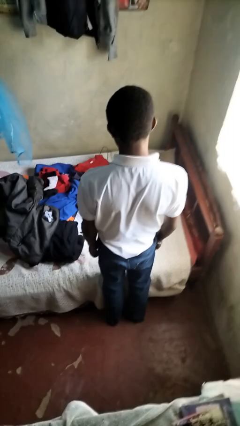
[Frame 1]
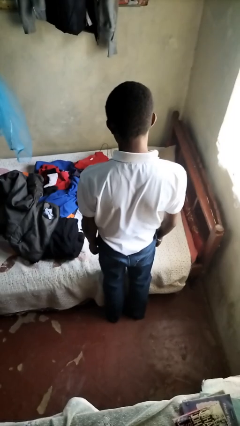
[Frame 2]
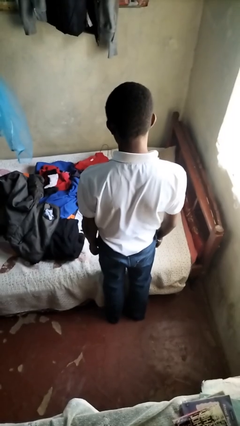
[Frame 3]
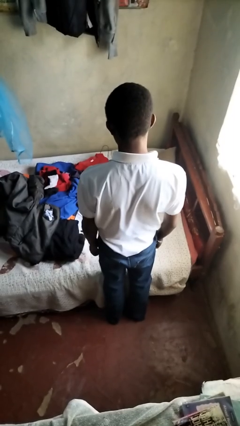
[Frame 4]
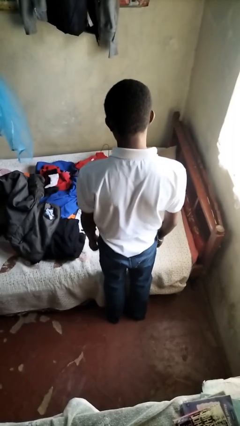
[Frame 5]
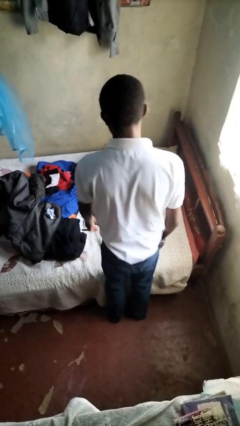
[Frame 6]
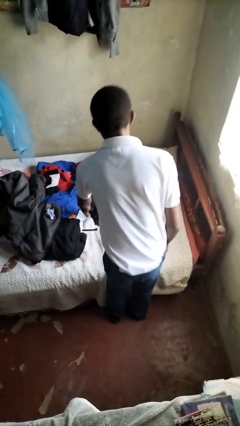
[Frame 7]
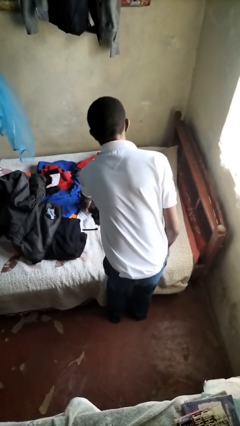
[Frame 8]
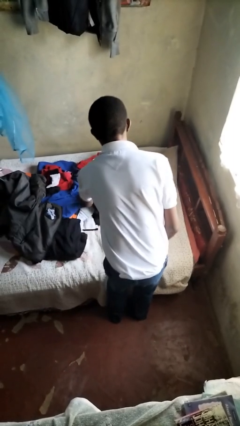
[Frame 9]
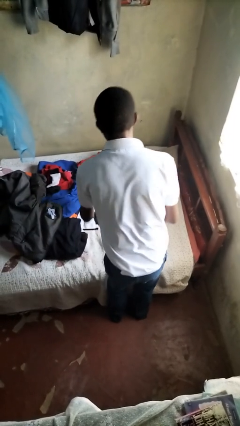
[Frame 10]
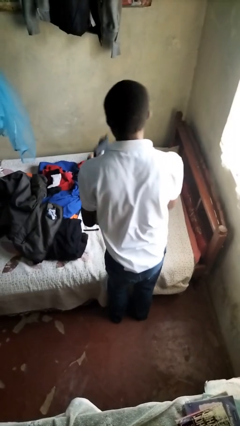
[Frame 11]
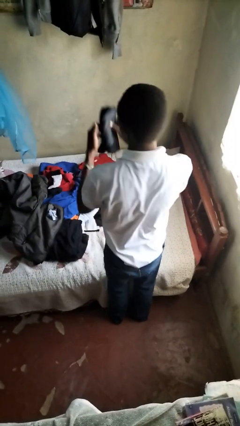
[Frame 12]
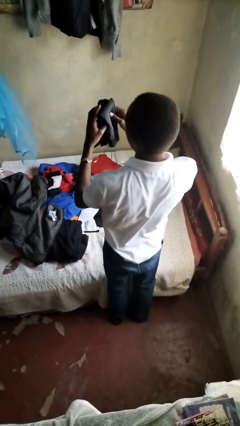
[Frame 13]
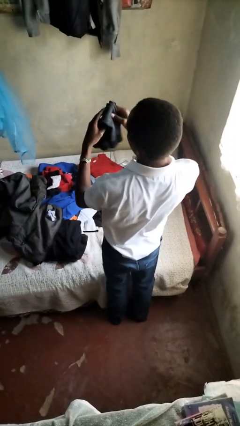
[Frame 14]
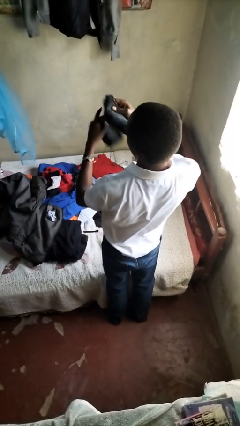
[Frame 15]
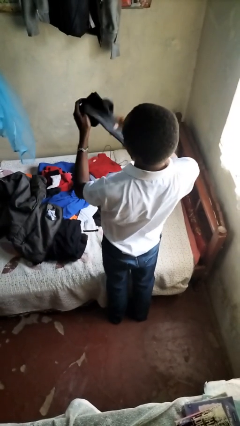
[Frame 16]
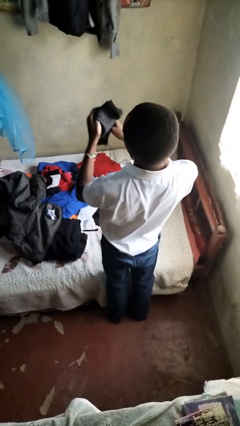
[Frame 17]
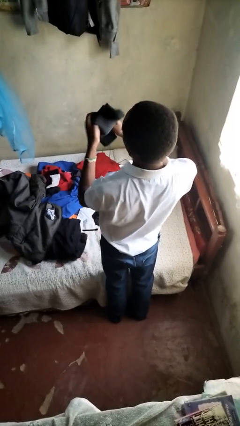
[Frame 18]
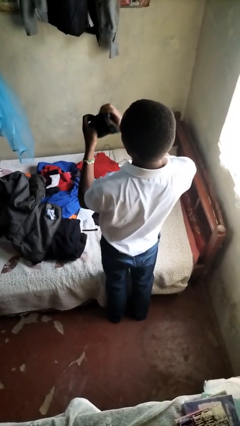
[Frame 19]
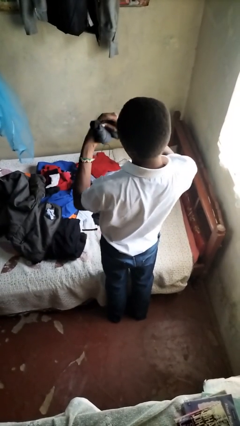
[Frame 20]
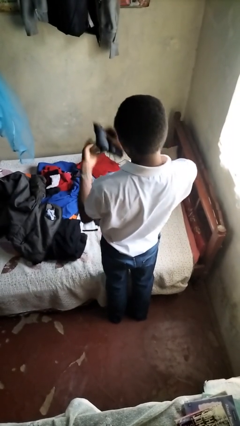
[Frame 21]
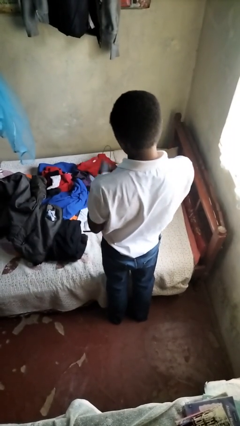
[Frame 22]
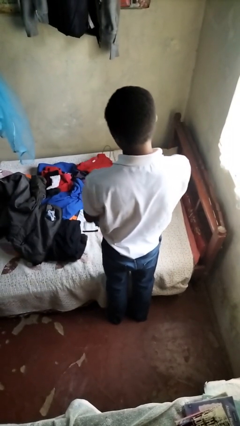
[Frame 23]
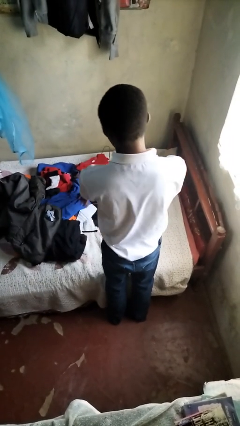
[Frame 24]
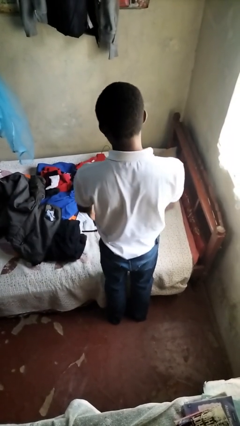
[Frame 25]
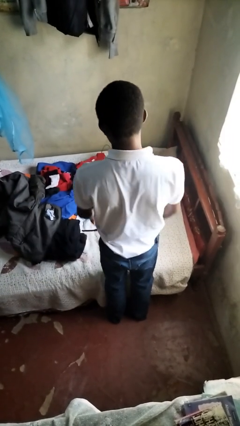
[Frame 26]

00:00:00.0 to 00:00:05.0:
person folds socks

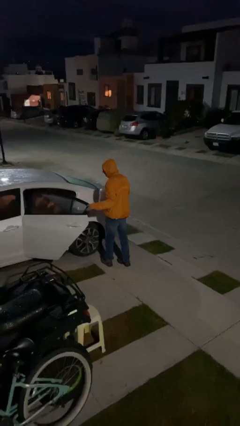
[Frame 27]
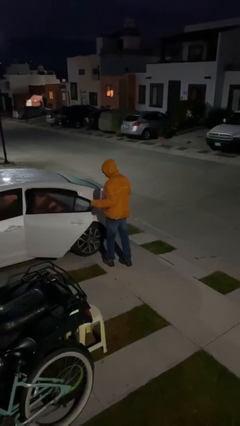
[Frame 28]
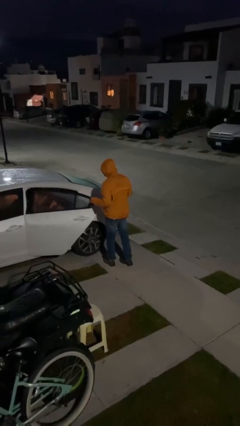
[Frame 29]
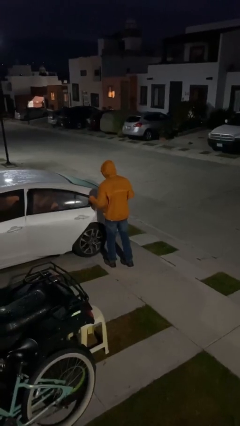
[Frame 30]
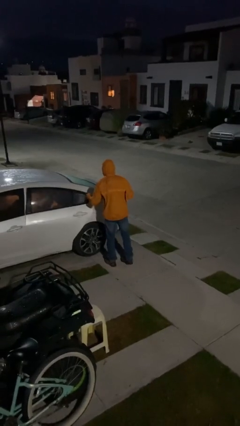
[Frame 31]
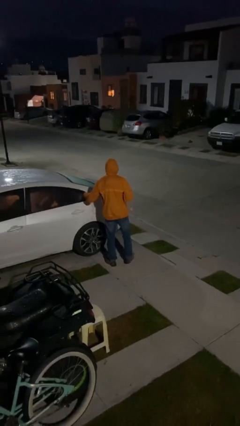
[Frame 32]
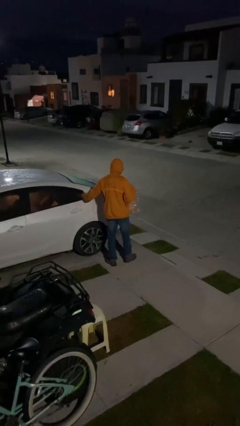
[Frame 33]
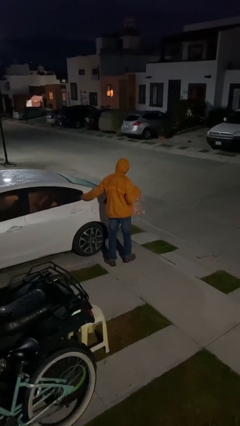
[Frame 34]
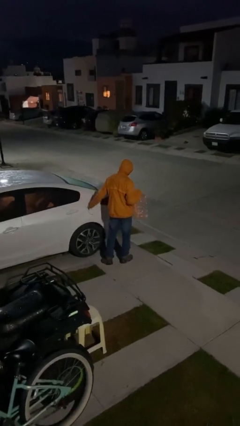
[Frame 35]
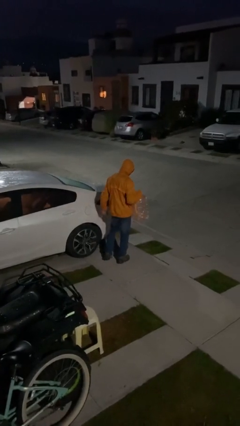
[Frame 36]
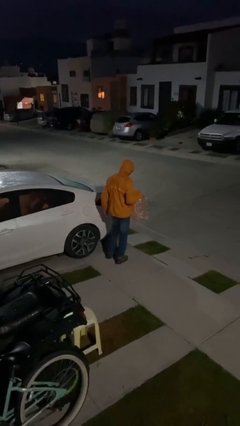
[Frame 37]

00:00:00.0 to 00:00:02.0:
person closes car door

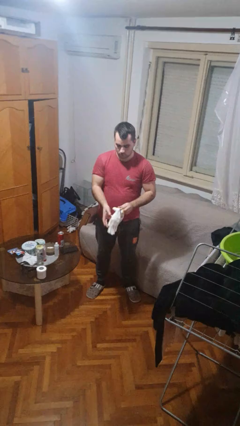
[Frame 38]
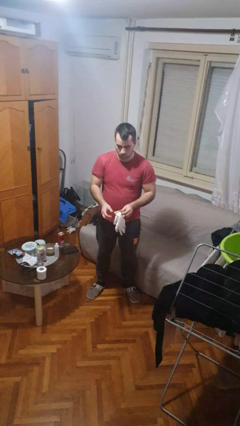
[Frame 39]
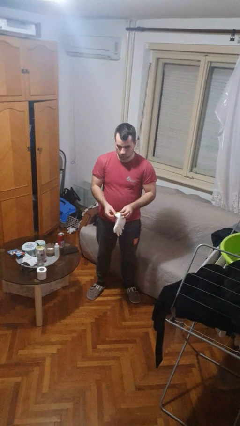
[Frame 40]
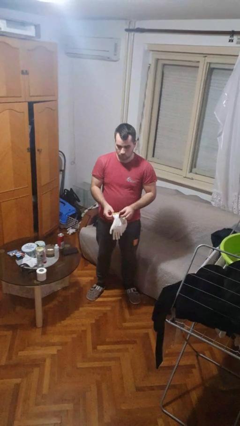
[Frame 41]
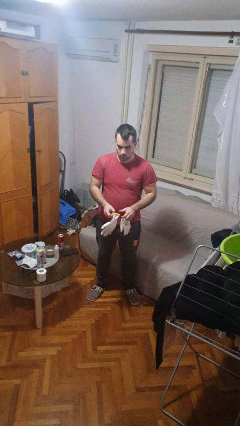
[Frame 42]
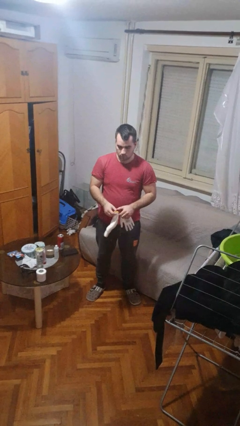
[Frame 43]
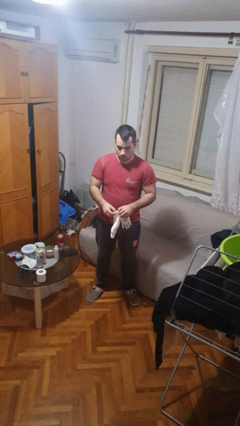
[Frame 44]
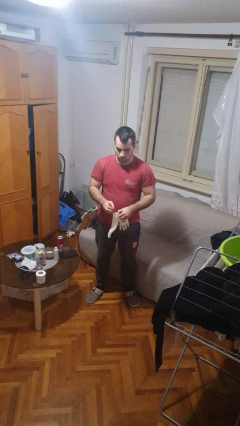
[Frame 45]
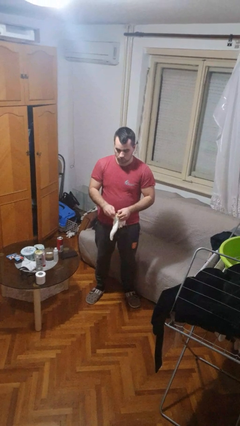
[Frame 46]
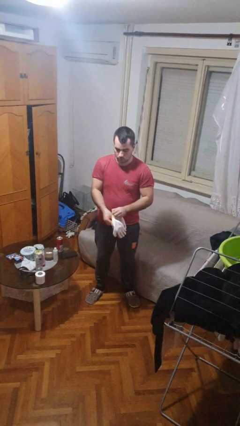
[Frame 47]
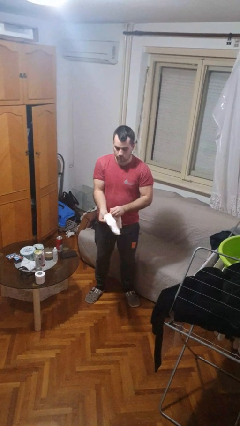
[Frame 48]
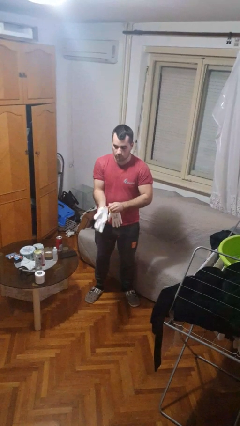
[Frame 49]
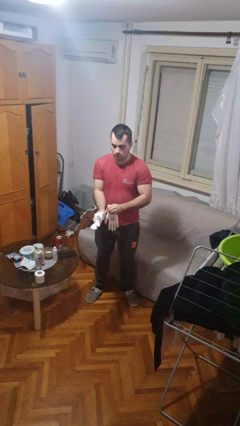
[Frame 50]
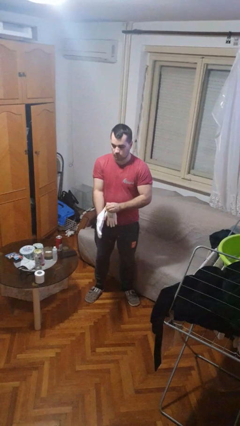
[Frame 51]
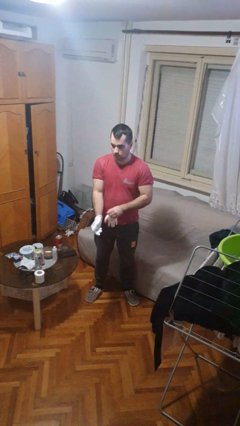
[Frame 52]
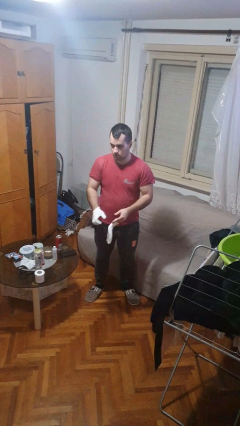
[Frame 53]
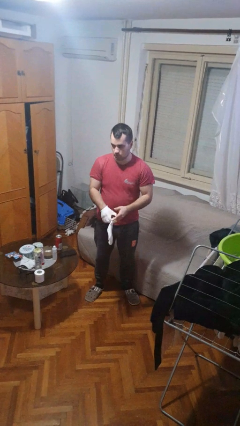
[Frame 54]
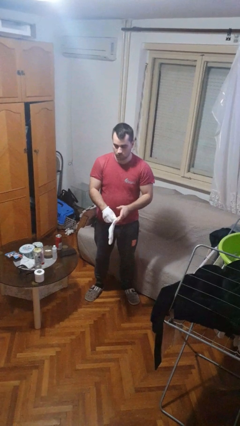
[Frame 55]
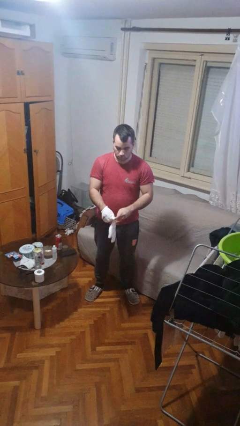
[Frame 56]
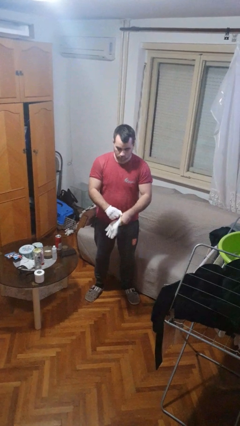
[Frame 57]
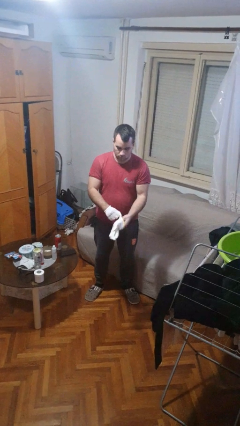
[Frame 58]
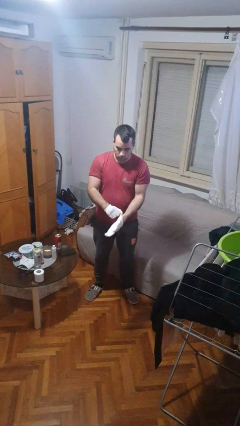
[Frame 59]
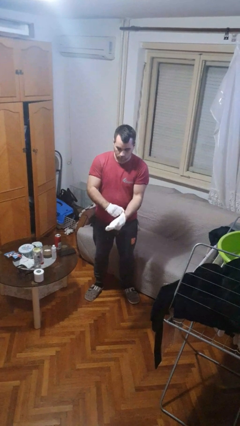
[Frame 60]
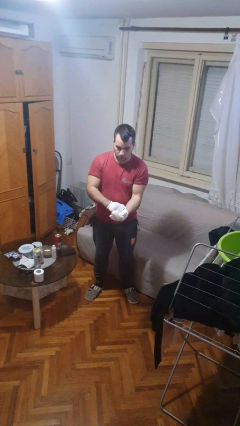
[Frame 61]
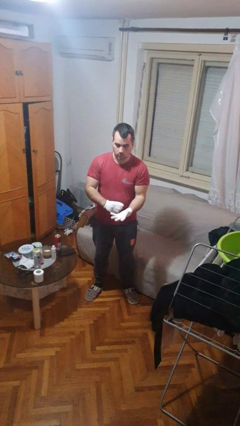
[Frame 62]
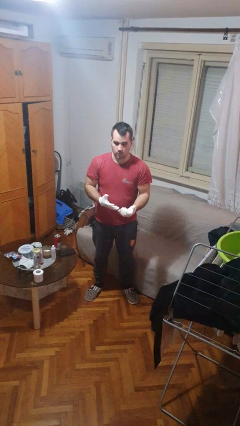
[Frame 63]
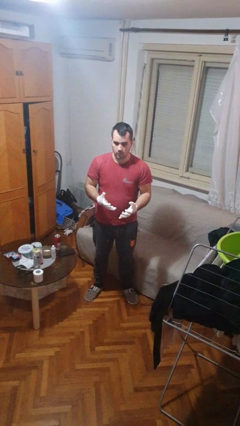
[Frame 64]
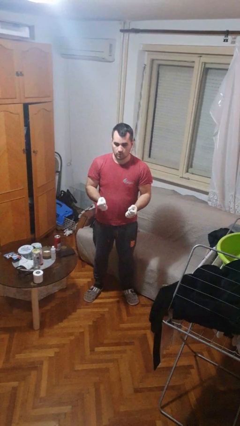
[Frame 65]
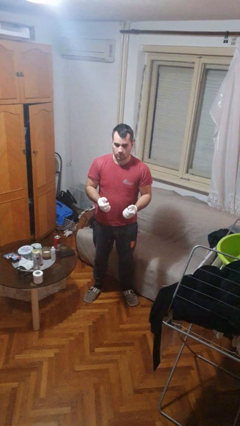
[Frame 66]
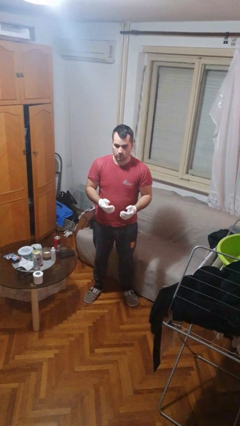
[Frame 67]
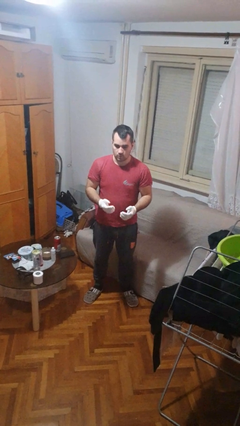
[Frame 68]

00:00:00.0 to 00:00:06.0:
person puts on gloves

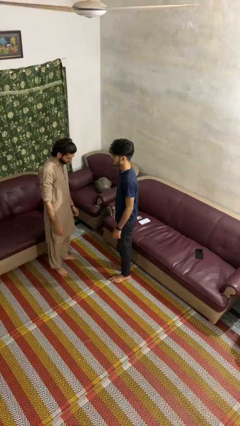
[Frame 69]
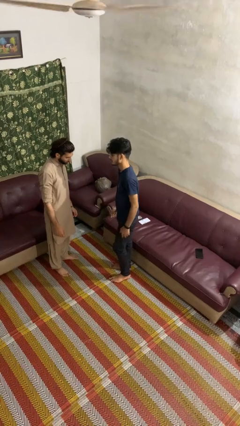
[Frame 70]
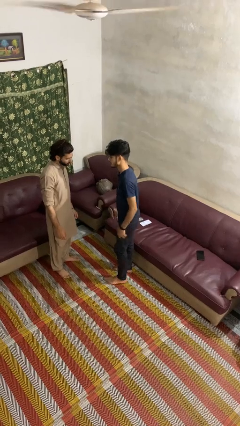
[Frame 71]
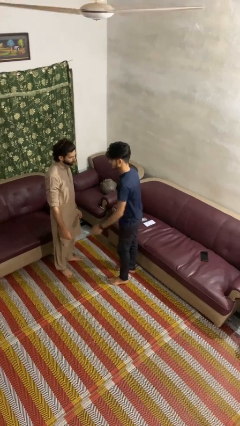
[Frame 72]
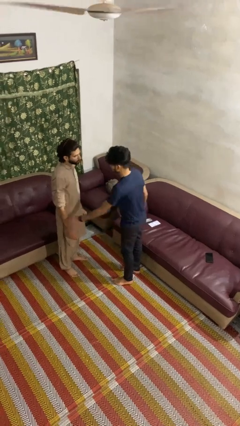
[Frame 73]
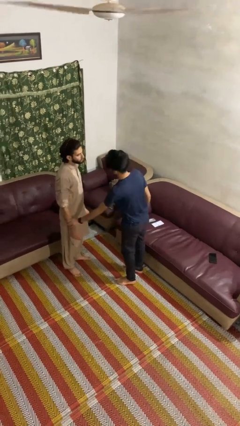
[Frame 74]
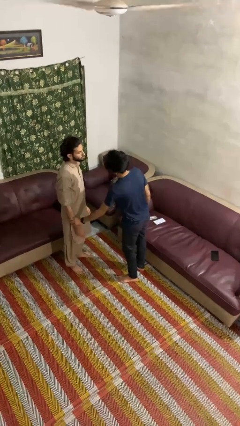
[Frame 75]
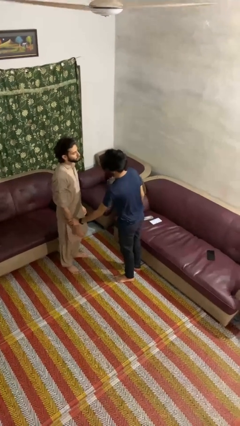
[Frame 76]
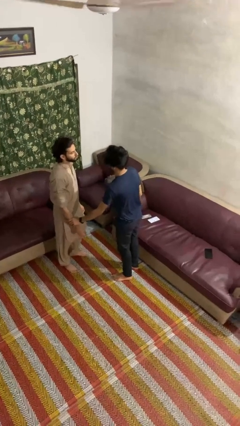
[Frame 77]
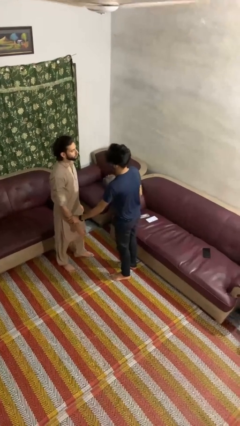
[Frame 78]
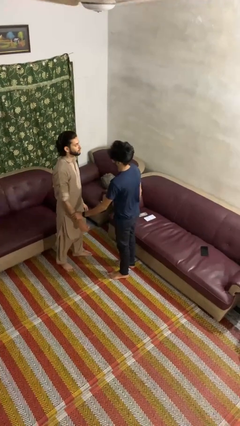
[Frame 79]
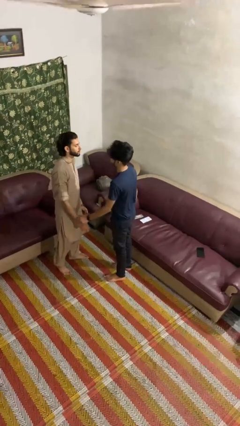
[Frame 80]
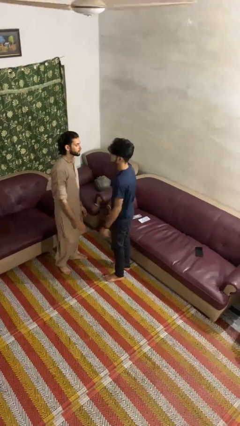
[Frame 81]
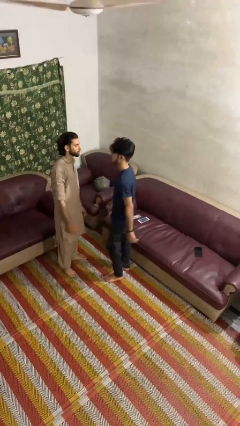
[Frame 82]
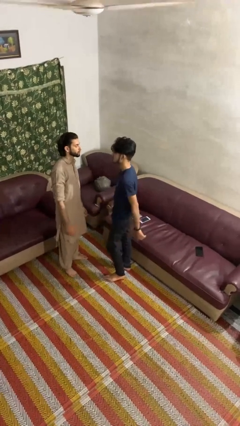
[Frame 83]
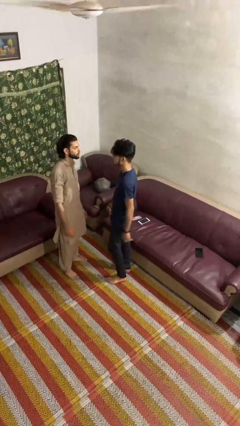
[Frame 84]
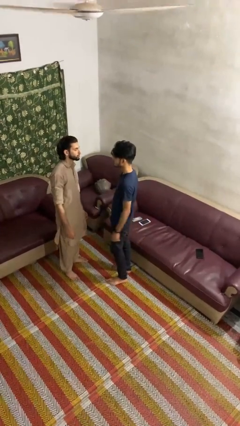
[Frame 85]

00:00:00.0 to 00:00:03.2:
person grabs person by forearm

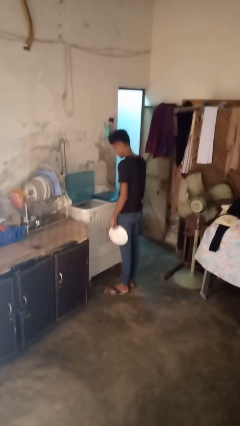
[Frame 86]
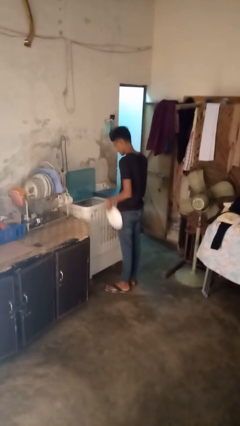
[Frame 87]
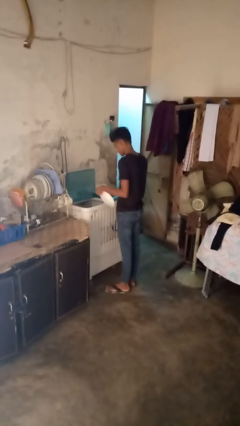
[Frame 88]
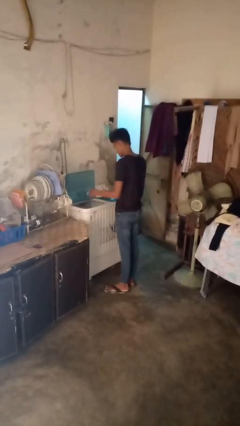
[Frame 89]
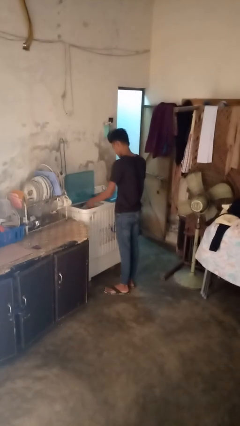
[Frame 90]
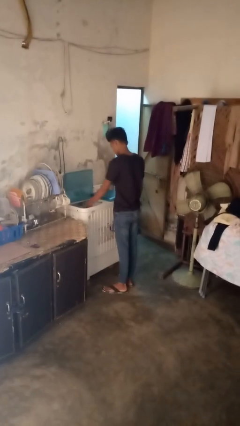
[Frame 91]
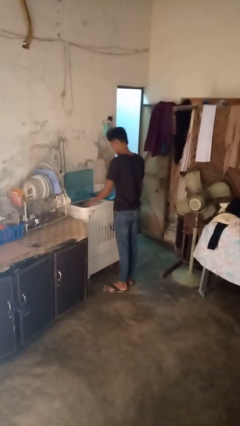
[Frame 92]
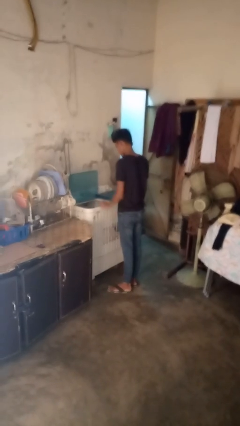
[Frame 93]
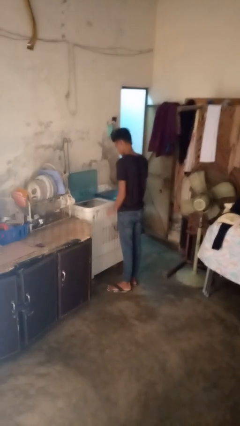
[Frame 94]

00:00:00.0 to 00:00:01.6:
person loads dishwasher

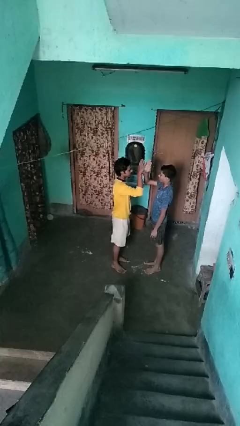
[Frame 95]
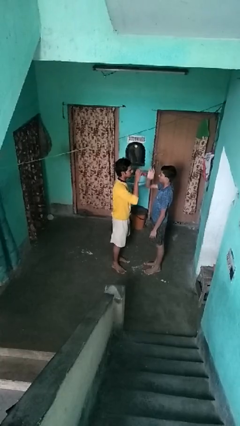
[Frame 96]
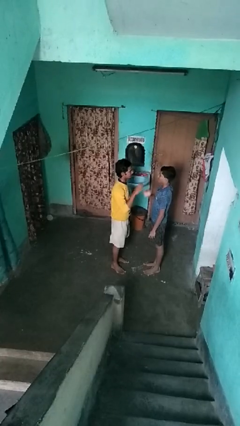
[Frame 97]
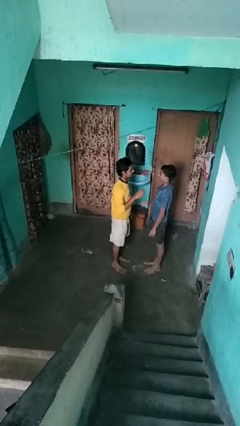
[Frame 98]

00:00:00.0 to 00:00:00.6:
person highfives hand
